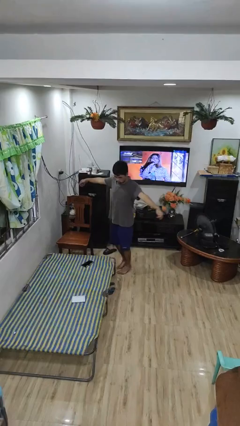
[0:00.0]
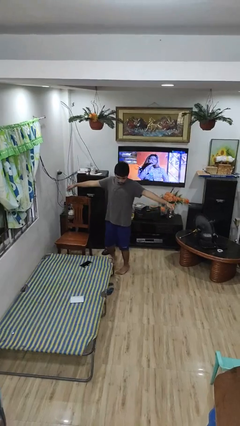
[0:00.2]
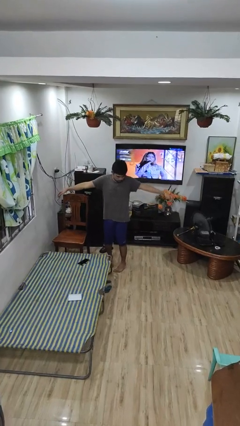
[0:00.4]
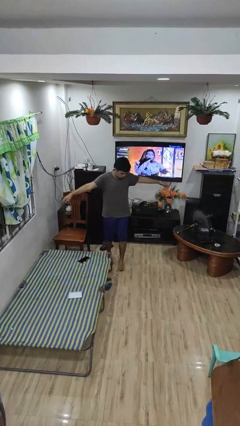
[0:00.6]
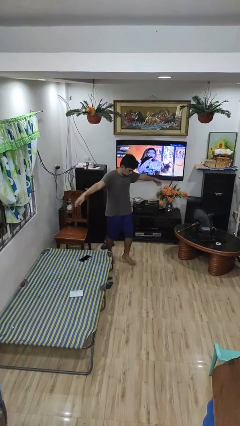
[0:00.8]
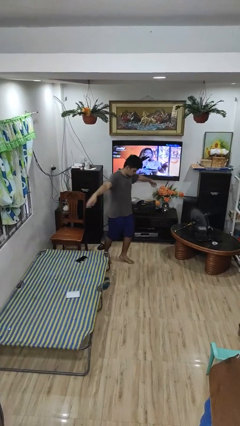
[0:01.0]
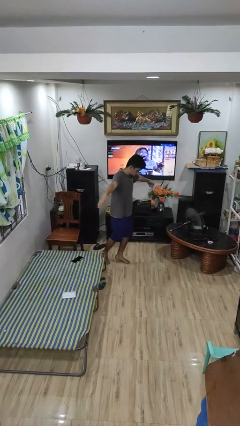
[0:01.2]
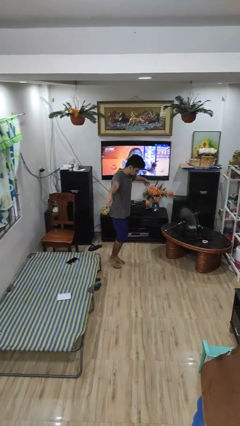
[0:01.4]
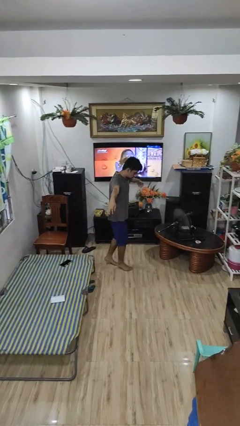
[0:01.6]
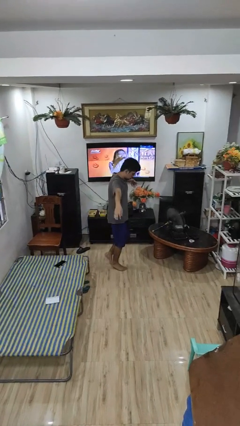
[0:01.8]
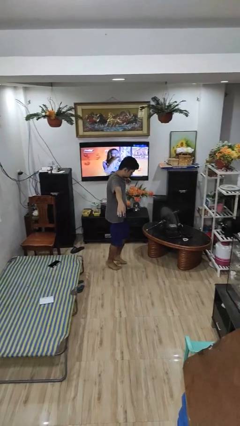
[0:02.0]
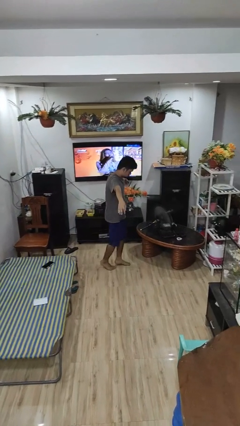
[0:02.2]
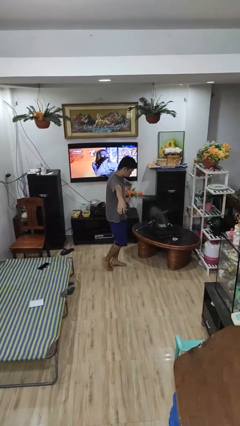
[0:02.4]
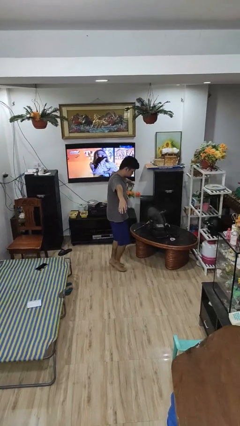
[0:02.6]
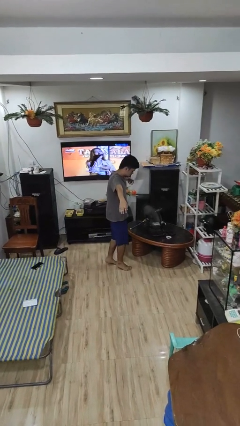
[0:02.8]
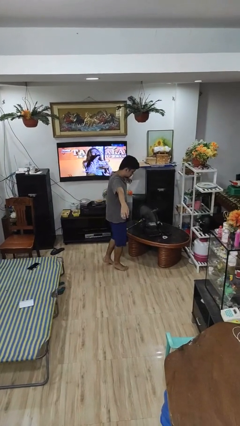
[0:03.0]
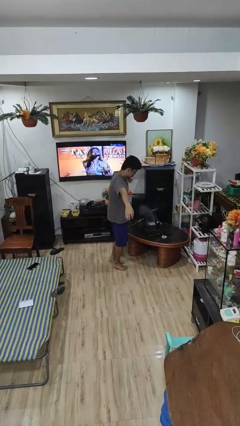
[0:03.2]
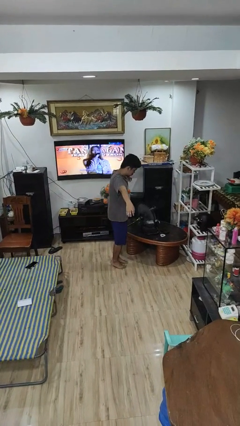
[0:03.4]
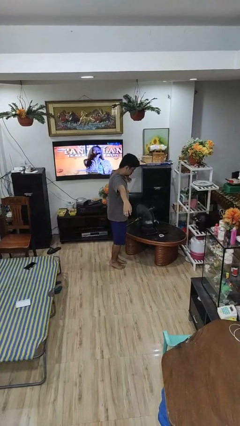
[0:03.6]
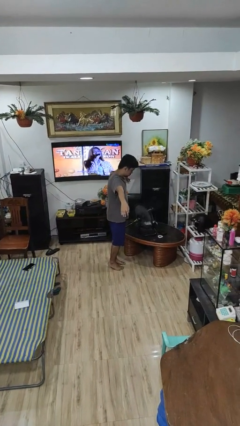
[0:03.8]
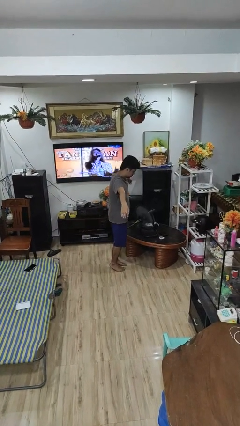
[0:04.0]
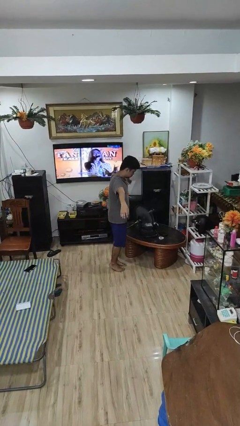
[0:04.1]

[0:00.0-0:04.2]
person walks tiptoe

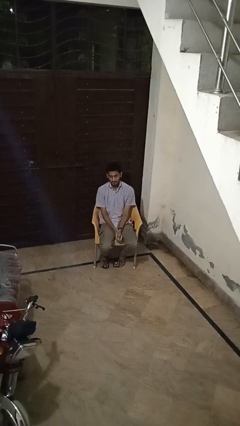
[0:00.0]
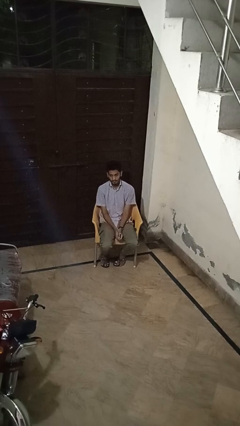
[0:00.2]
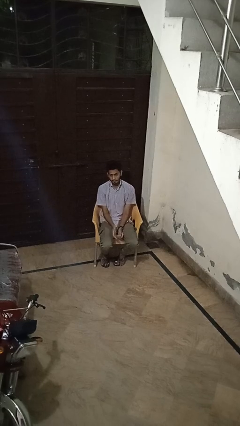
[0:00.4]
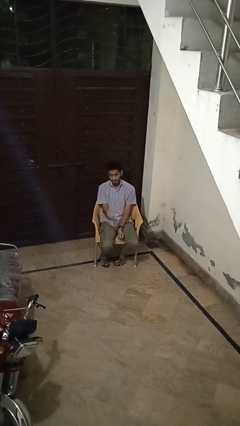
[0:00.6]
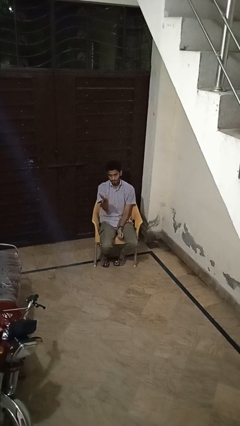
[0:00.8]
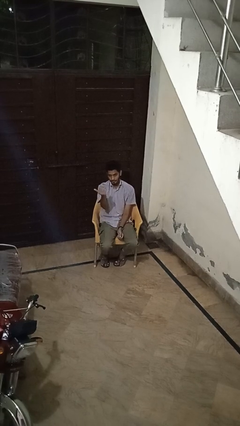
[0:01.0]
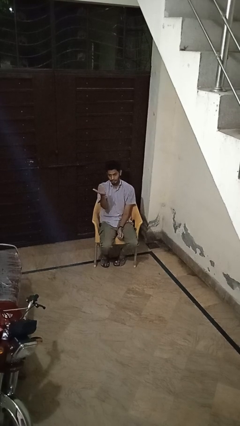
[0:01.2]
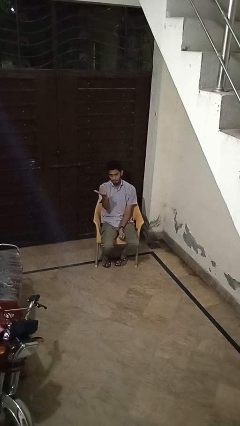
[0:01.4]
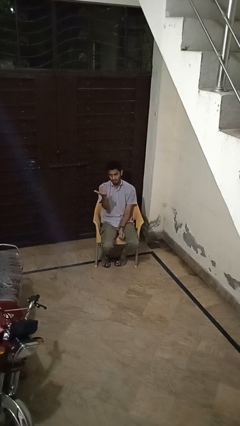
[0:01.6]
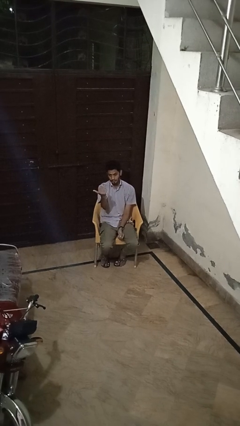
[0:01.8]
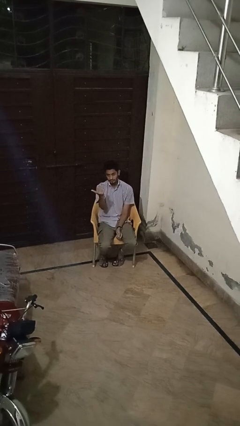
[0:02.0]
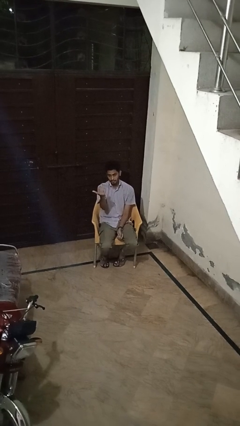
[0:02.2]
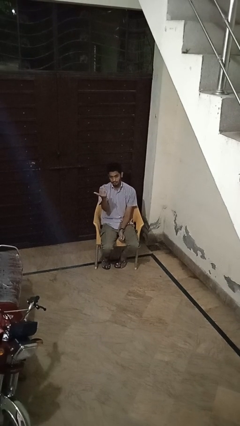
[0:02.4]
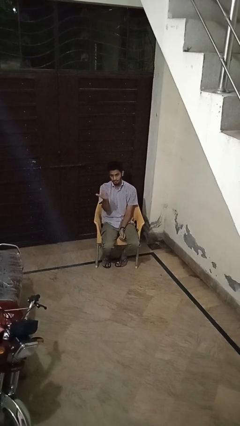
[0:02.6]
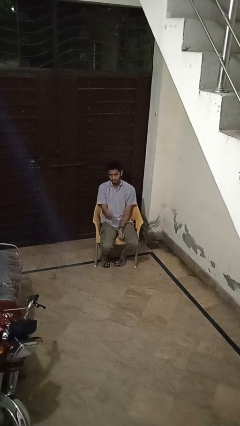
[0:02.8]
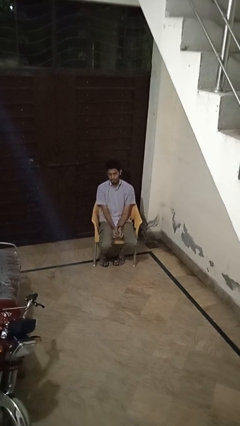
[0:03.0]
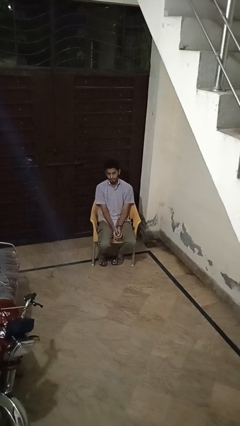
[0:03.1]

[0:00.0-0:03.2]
person gestures come here

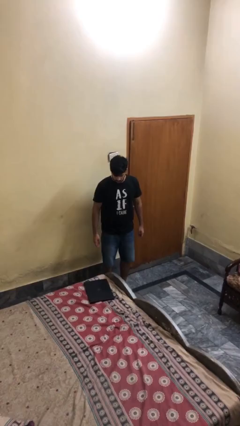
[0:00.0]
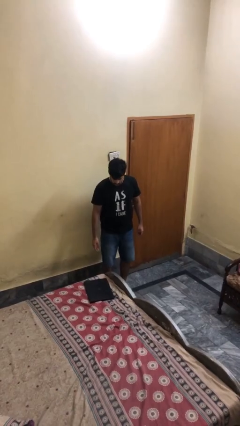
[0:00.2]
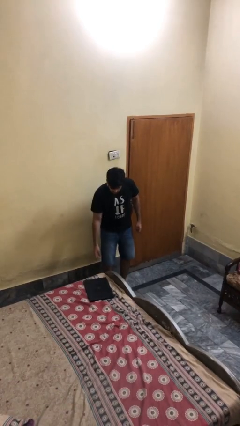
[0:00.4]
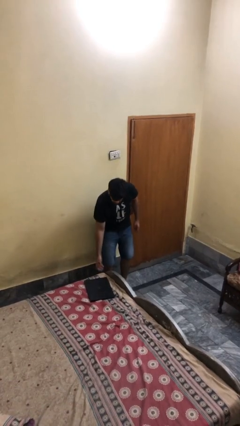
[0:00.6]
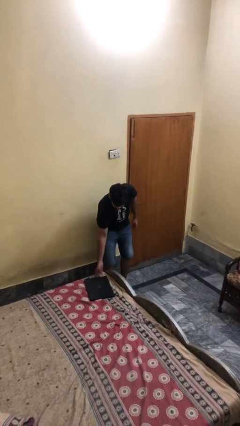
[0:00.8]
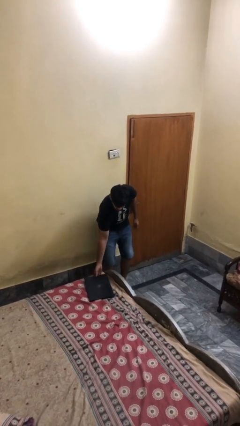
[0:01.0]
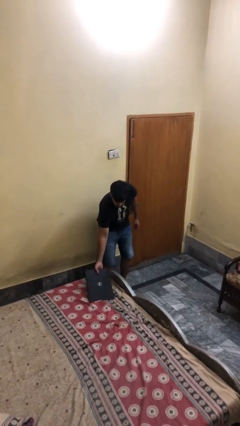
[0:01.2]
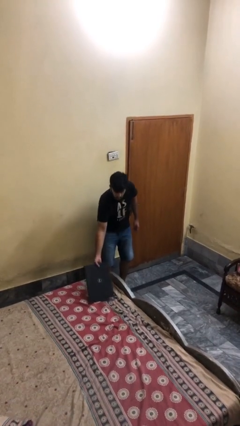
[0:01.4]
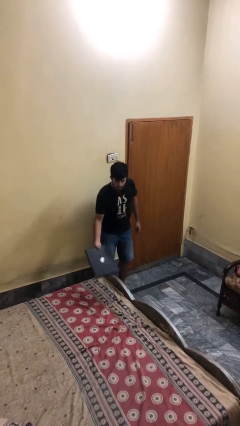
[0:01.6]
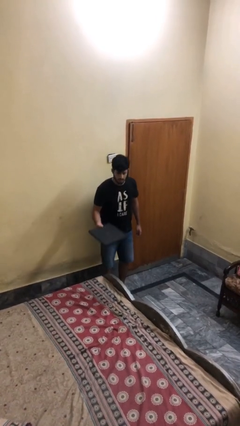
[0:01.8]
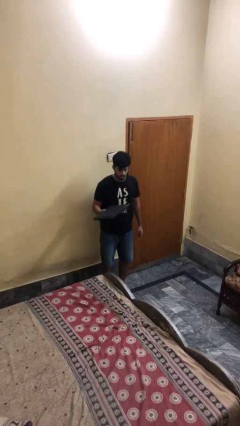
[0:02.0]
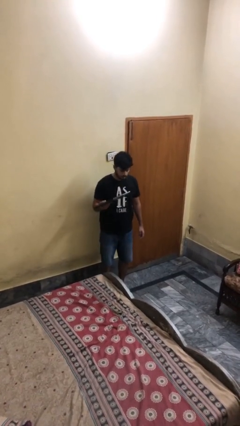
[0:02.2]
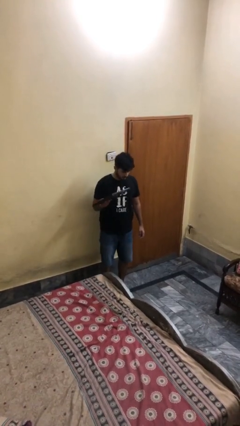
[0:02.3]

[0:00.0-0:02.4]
person picks up object from bed

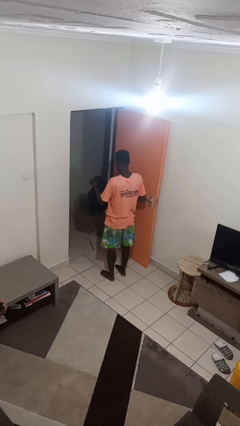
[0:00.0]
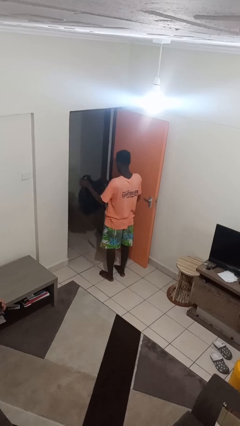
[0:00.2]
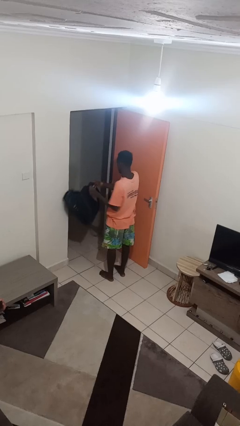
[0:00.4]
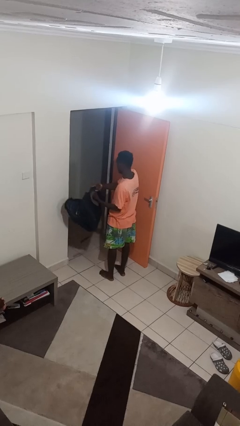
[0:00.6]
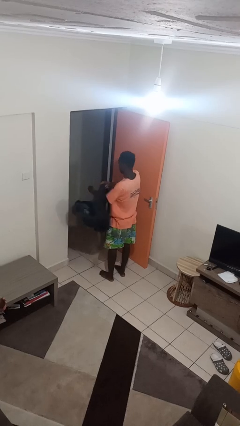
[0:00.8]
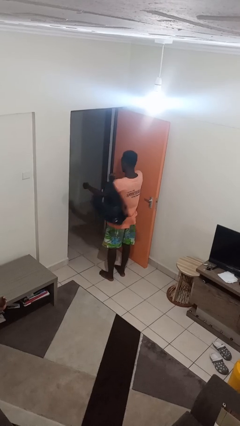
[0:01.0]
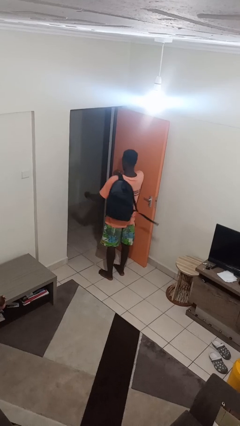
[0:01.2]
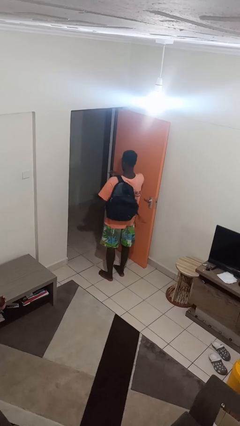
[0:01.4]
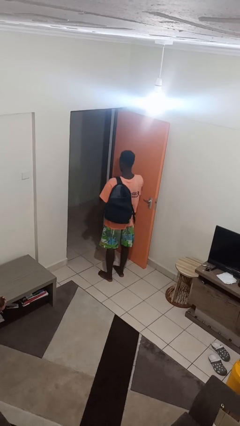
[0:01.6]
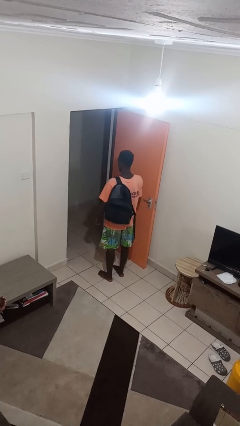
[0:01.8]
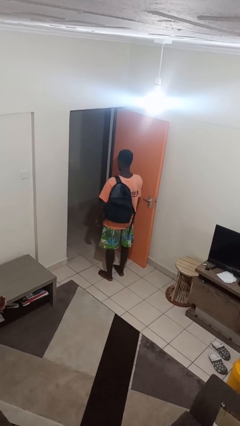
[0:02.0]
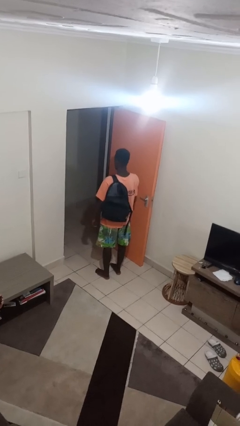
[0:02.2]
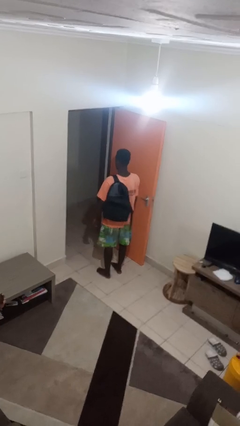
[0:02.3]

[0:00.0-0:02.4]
person puts object into backpack

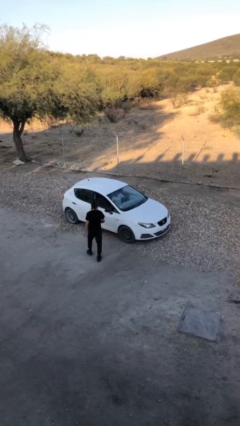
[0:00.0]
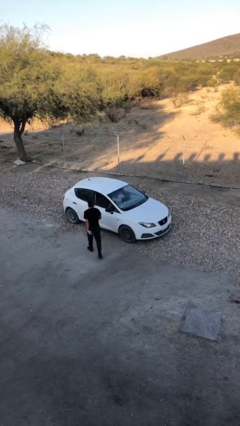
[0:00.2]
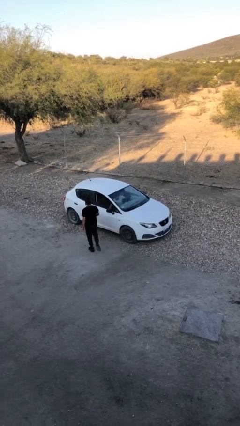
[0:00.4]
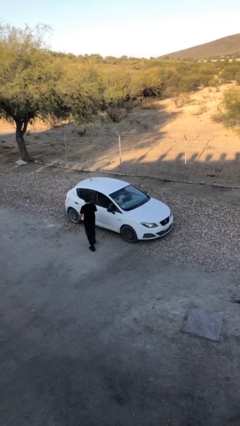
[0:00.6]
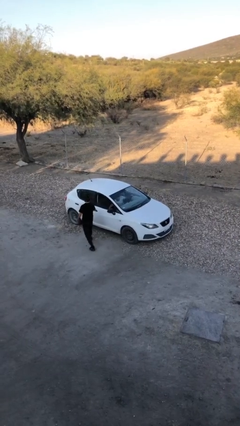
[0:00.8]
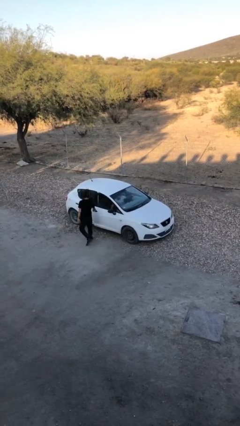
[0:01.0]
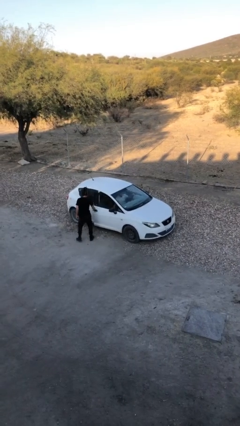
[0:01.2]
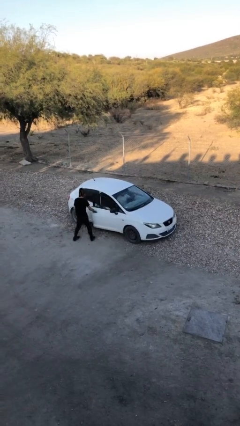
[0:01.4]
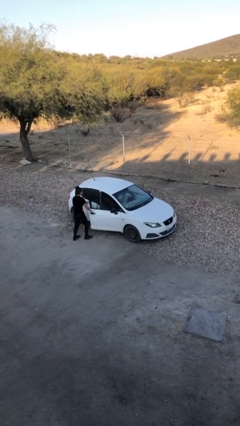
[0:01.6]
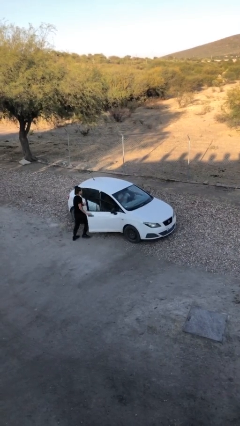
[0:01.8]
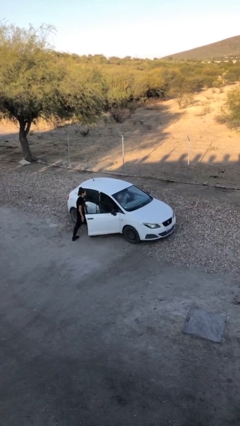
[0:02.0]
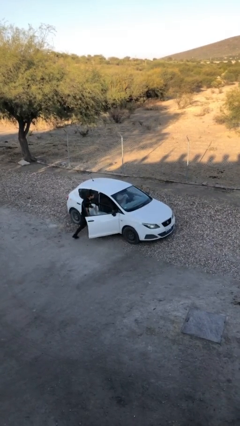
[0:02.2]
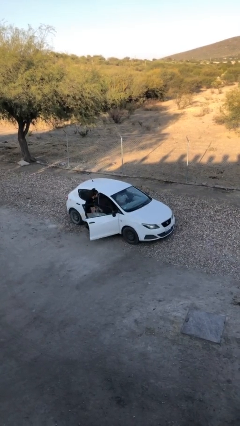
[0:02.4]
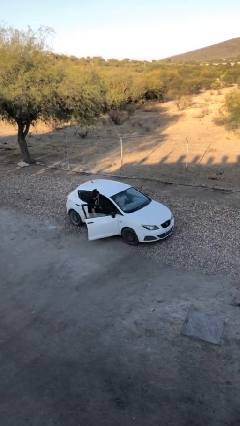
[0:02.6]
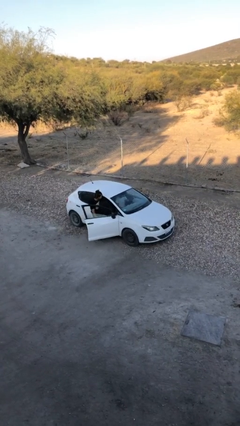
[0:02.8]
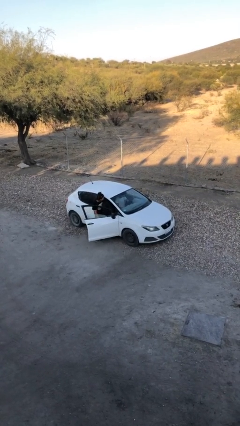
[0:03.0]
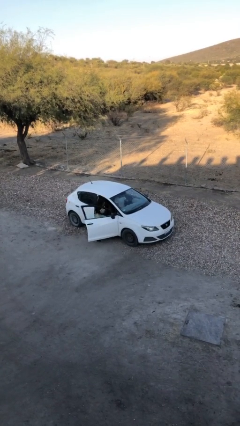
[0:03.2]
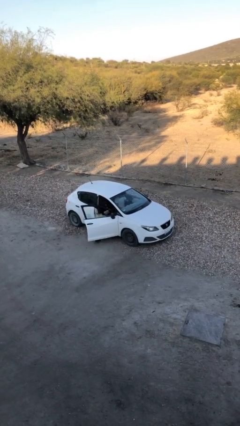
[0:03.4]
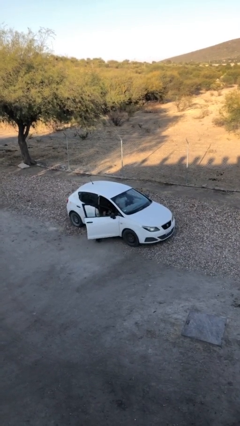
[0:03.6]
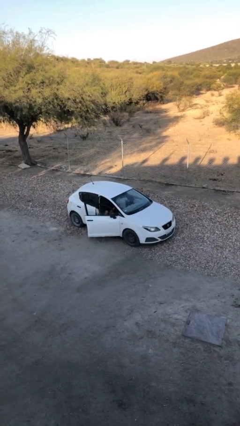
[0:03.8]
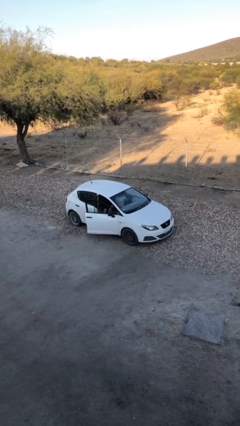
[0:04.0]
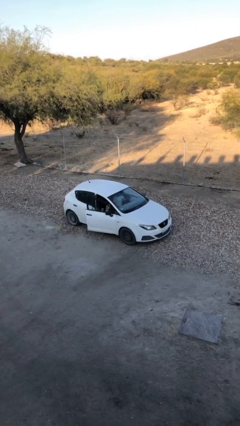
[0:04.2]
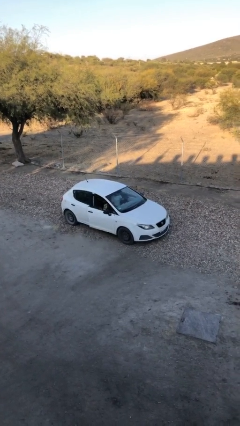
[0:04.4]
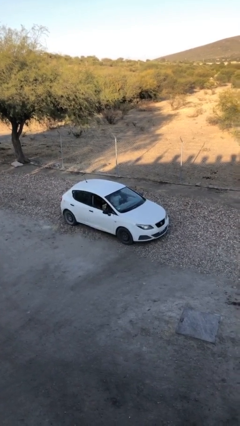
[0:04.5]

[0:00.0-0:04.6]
car picks up person

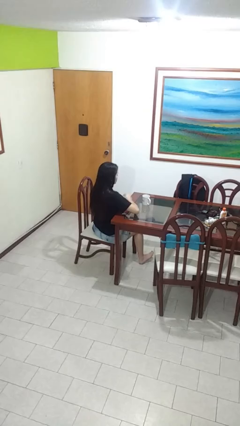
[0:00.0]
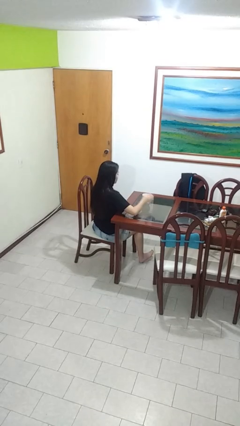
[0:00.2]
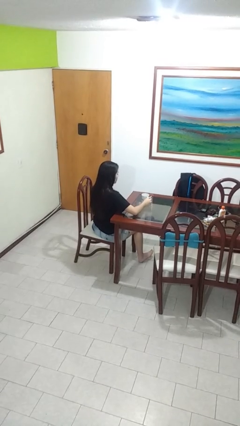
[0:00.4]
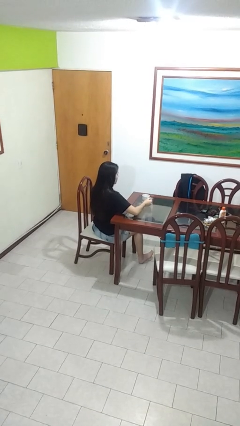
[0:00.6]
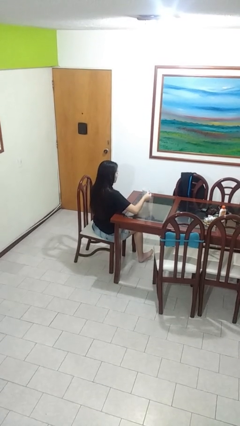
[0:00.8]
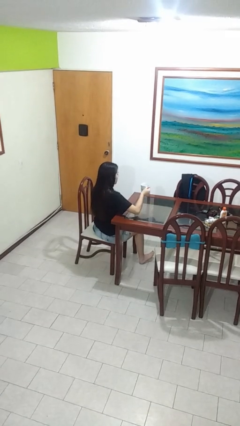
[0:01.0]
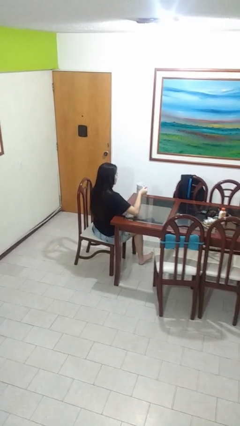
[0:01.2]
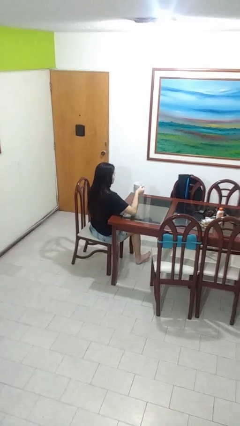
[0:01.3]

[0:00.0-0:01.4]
person picks up object from table
